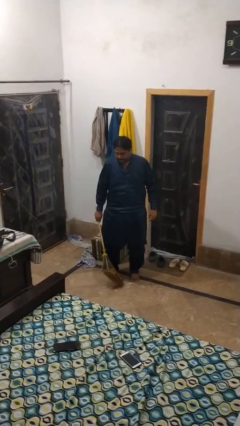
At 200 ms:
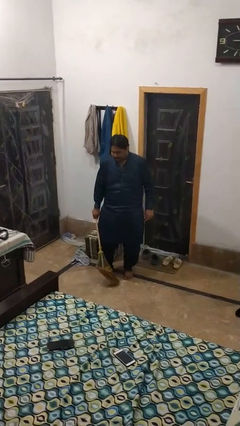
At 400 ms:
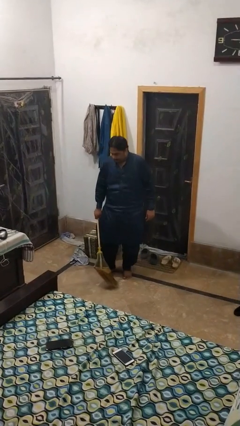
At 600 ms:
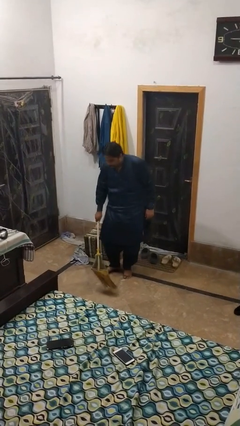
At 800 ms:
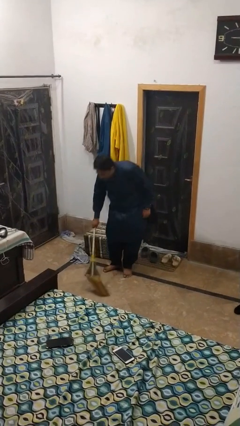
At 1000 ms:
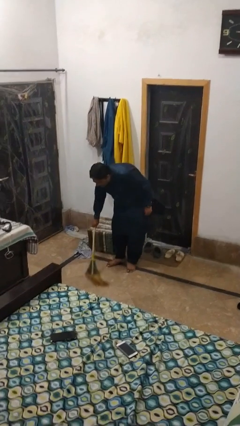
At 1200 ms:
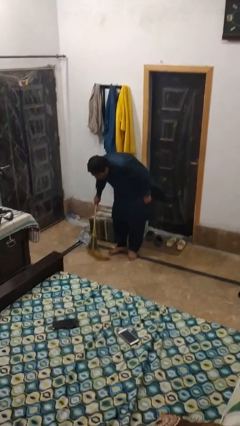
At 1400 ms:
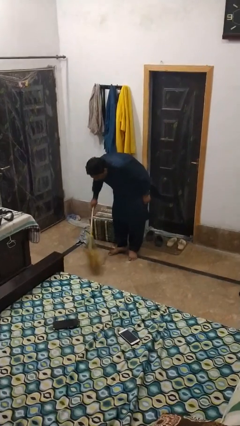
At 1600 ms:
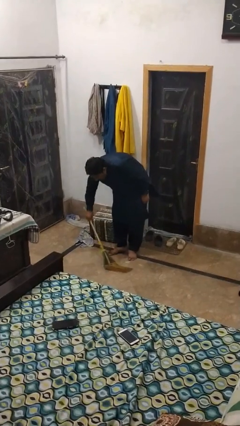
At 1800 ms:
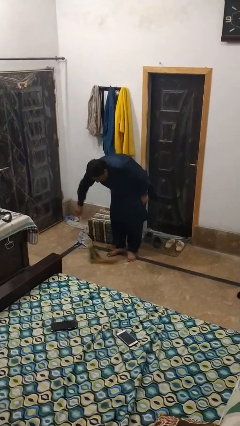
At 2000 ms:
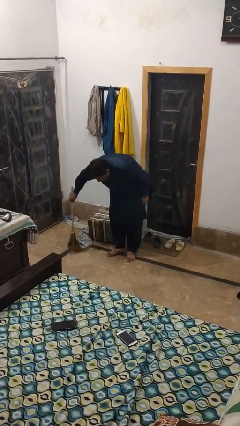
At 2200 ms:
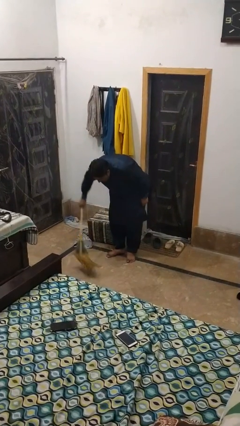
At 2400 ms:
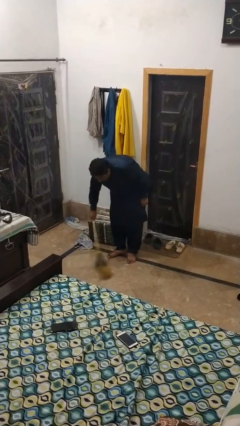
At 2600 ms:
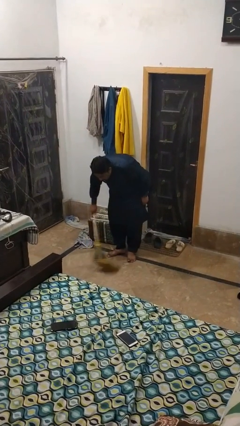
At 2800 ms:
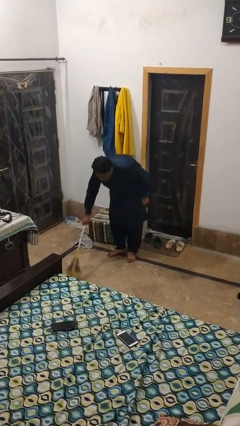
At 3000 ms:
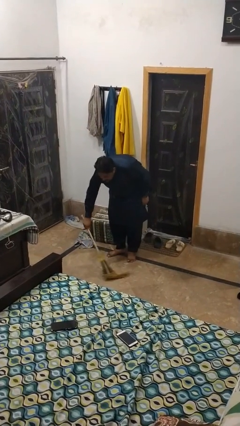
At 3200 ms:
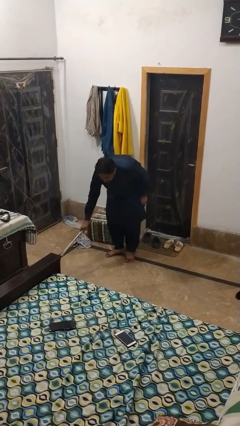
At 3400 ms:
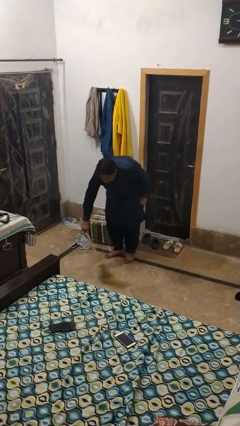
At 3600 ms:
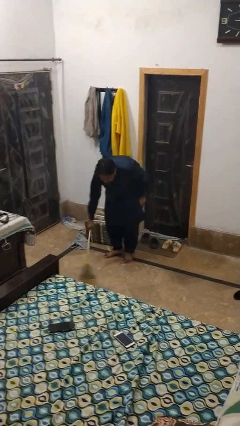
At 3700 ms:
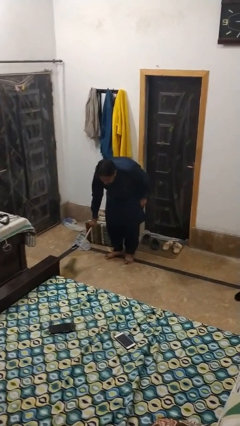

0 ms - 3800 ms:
person sweeps floor

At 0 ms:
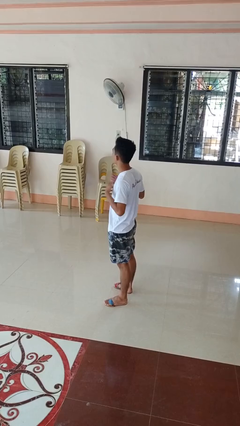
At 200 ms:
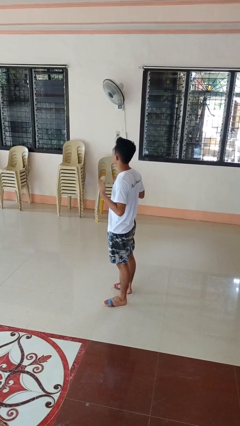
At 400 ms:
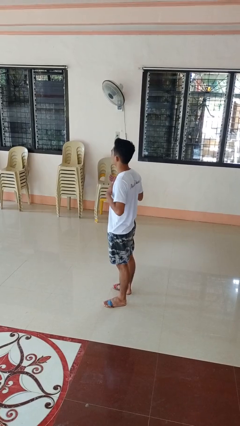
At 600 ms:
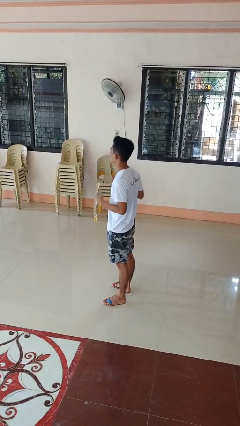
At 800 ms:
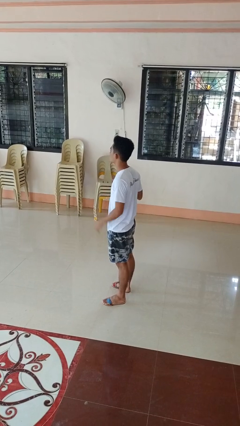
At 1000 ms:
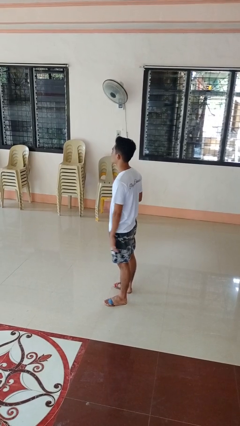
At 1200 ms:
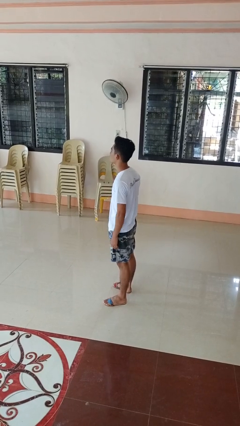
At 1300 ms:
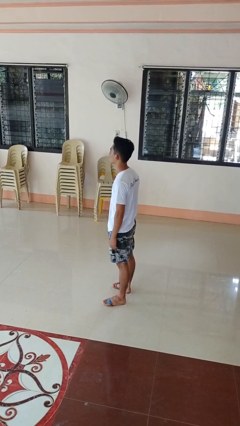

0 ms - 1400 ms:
person drums on chest

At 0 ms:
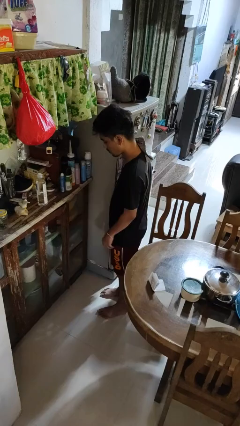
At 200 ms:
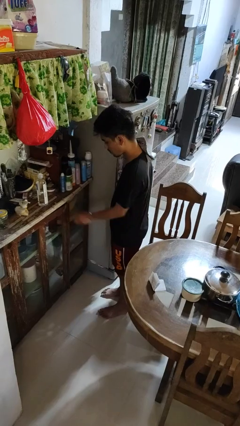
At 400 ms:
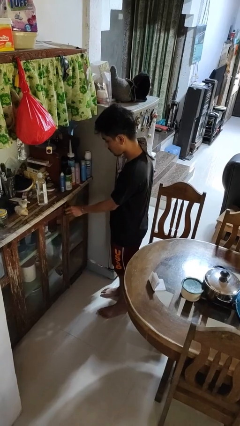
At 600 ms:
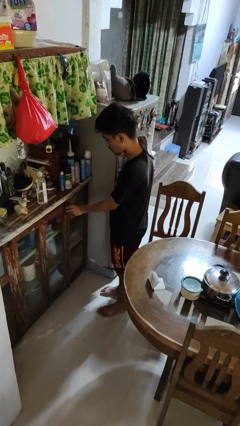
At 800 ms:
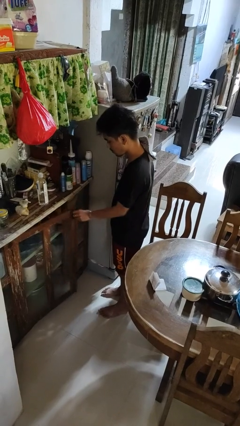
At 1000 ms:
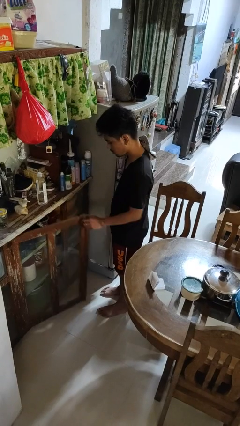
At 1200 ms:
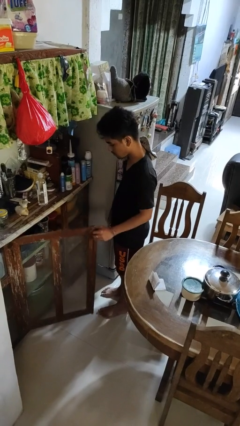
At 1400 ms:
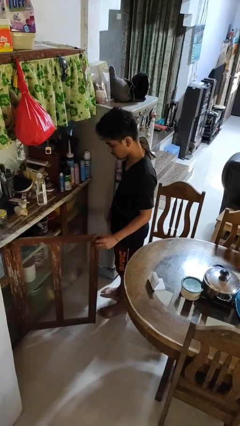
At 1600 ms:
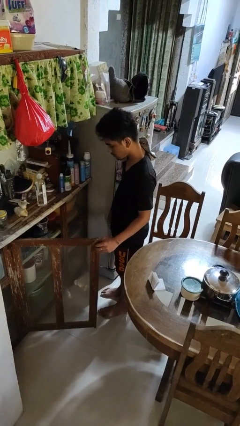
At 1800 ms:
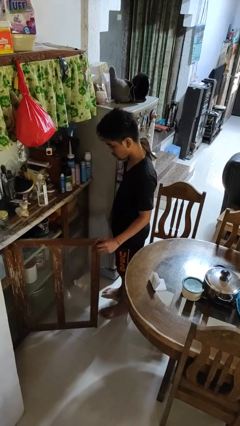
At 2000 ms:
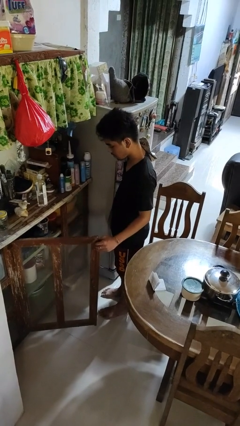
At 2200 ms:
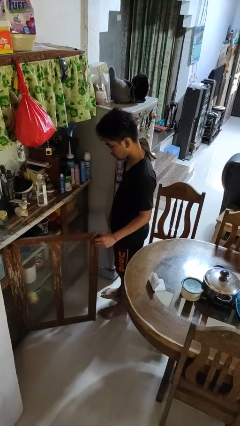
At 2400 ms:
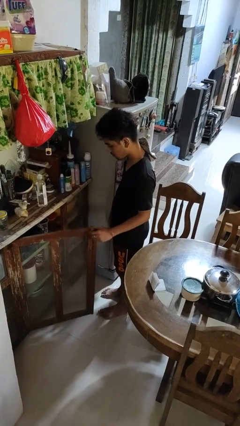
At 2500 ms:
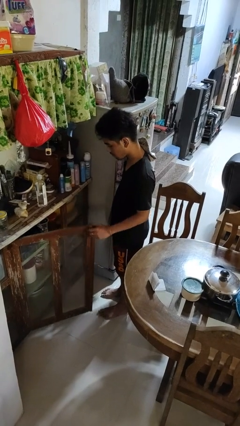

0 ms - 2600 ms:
person opens cabinet

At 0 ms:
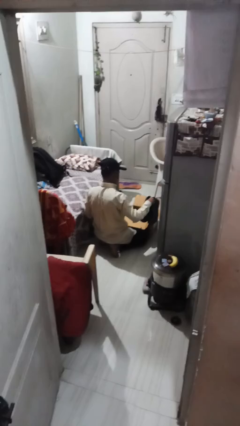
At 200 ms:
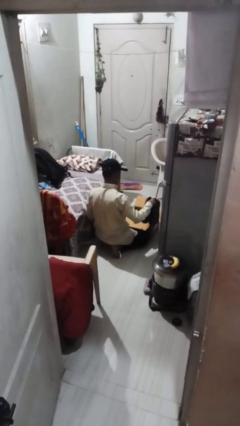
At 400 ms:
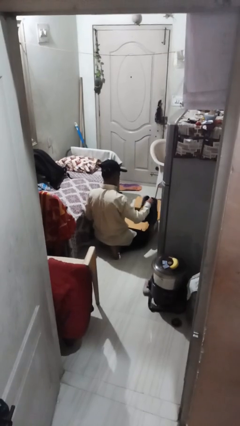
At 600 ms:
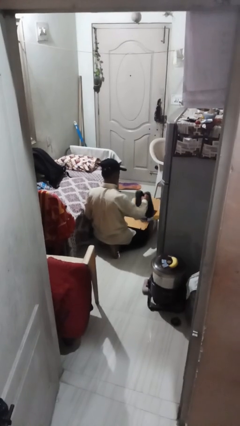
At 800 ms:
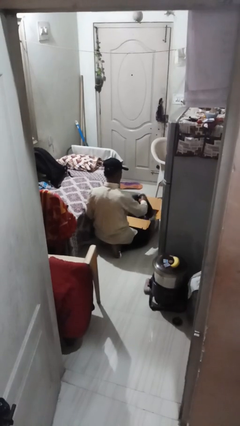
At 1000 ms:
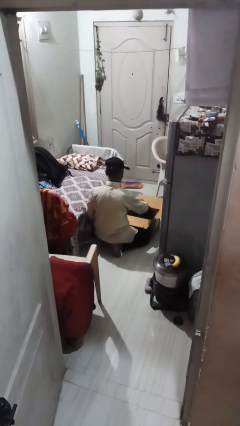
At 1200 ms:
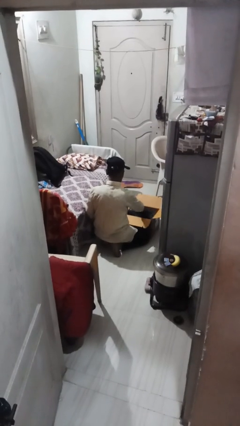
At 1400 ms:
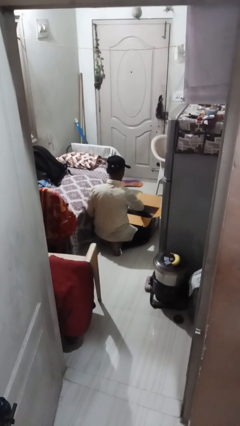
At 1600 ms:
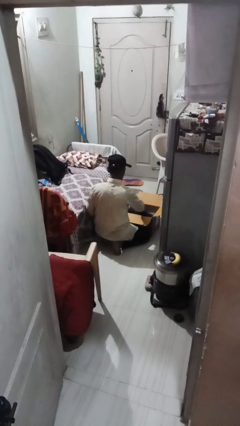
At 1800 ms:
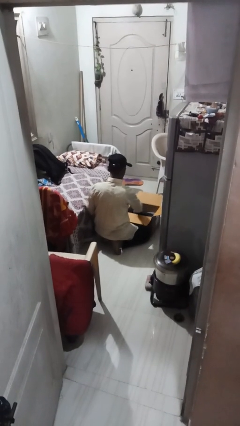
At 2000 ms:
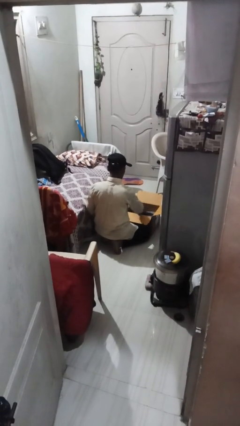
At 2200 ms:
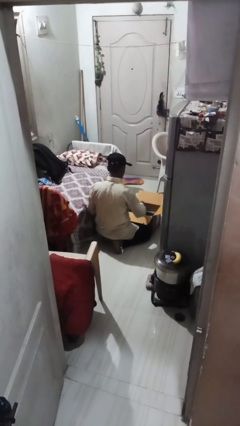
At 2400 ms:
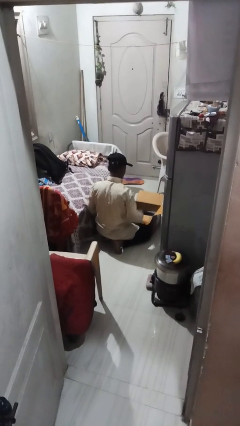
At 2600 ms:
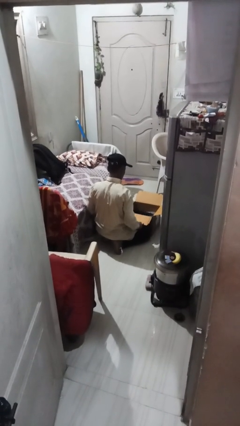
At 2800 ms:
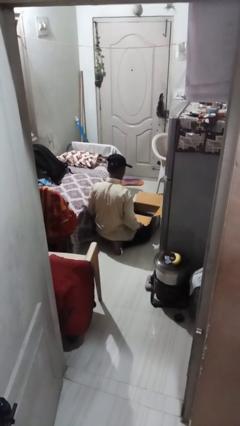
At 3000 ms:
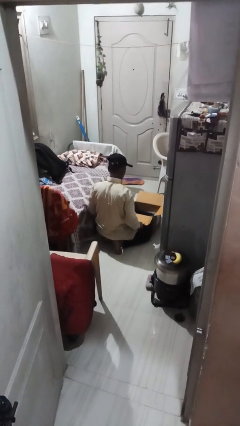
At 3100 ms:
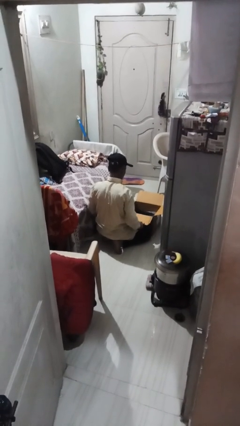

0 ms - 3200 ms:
person puts object into box

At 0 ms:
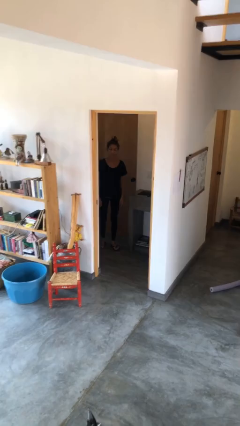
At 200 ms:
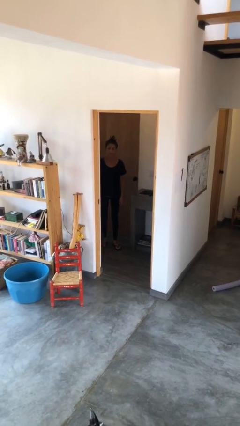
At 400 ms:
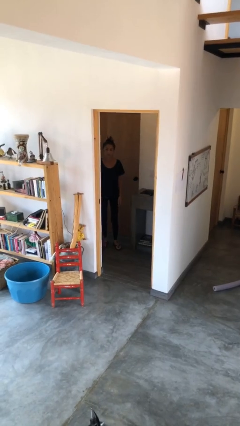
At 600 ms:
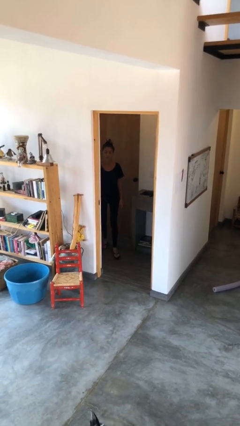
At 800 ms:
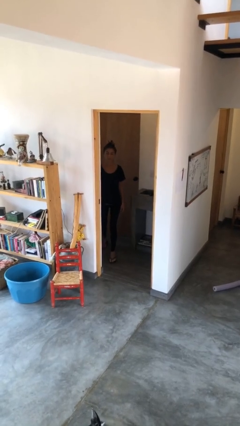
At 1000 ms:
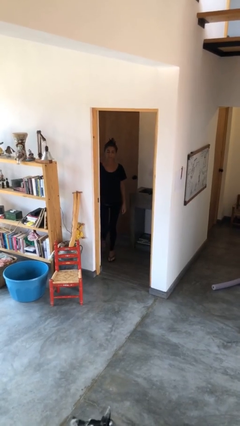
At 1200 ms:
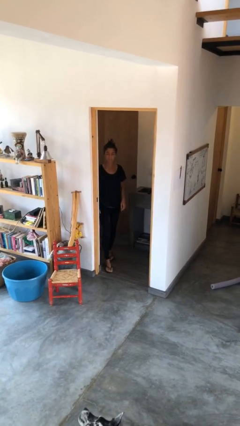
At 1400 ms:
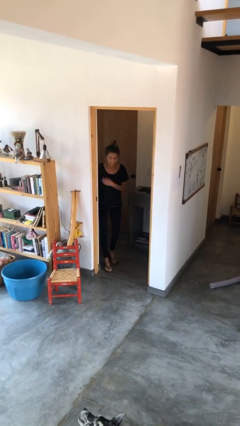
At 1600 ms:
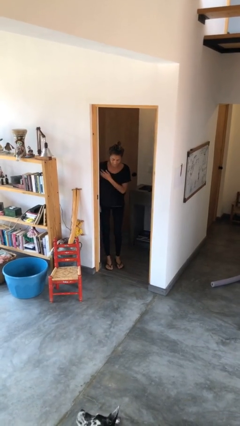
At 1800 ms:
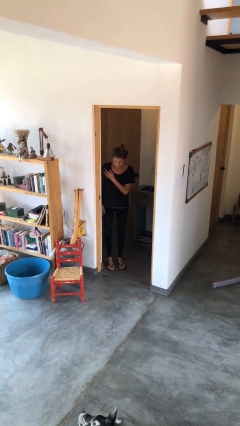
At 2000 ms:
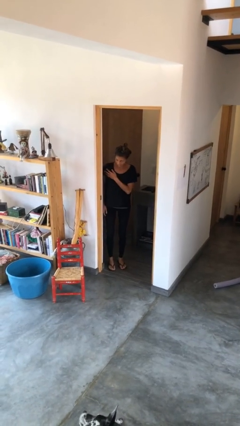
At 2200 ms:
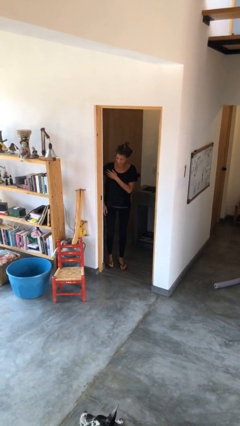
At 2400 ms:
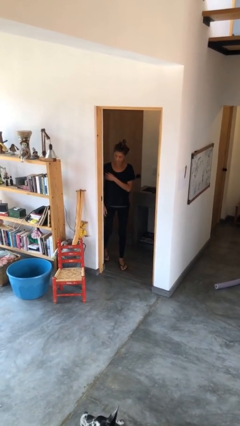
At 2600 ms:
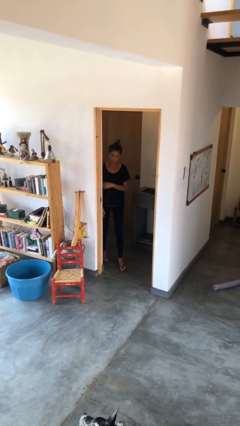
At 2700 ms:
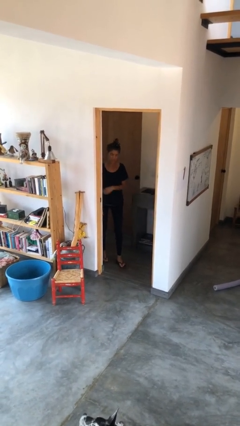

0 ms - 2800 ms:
person bumps into wall

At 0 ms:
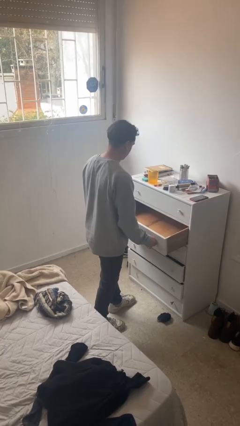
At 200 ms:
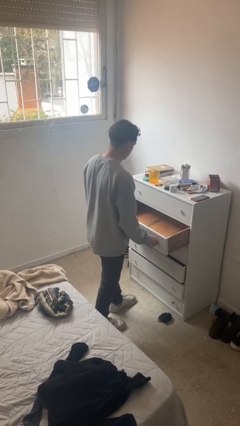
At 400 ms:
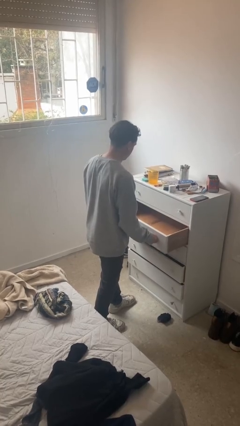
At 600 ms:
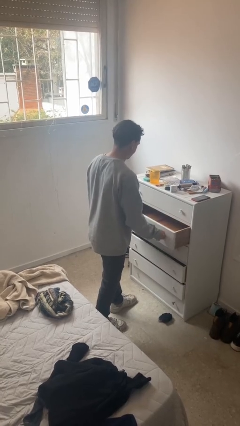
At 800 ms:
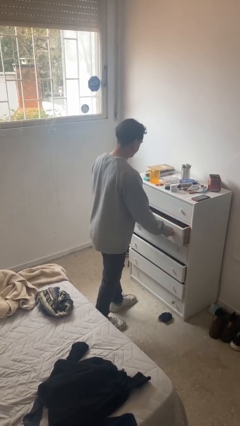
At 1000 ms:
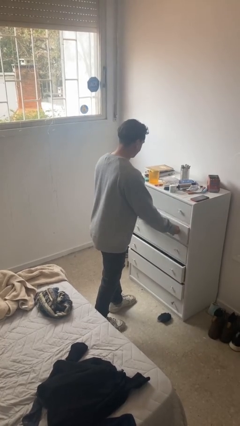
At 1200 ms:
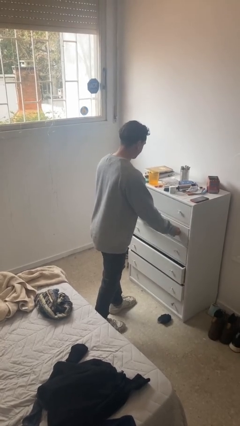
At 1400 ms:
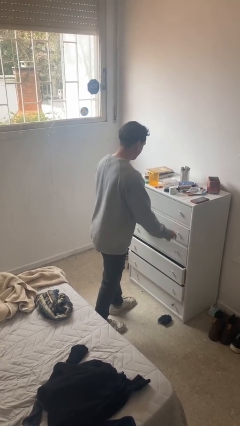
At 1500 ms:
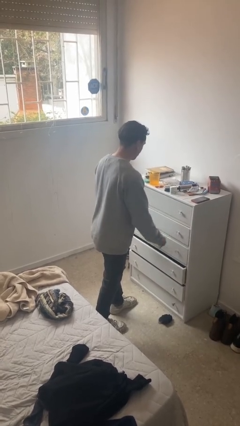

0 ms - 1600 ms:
person closes dresser drawer

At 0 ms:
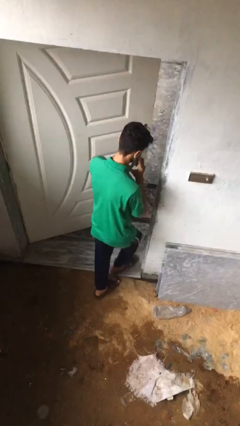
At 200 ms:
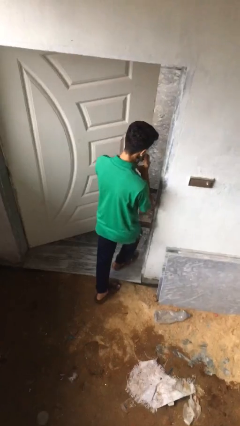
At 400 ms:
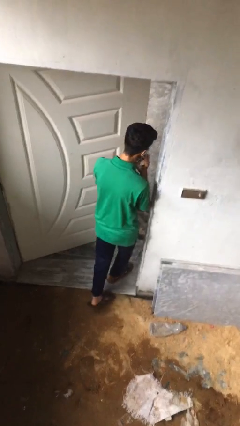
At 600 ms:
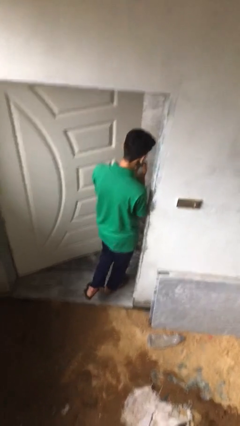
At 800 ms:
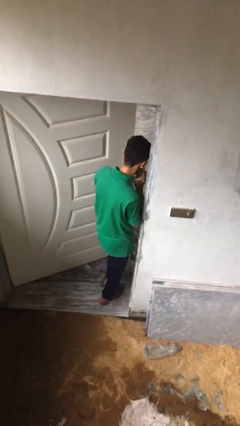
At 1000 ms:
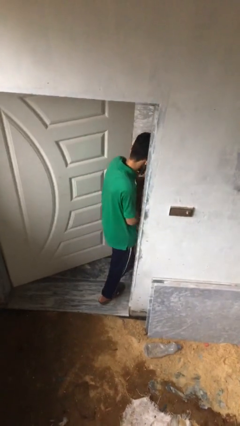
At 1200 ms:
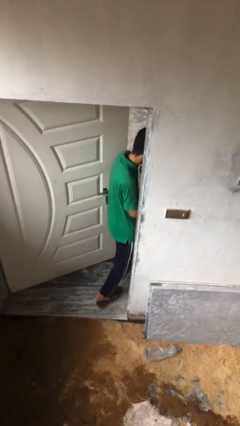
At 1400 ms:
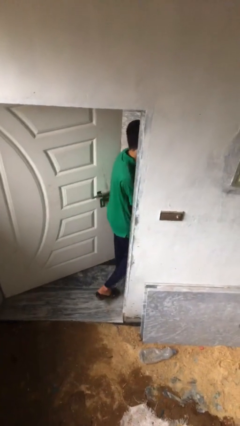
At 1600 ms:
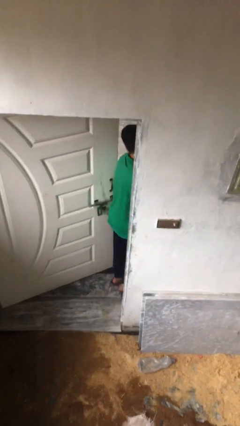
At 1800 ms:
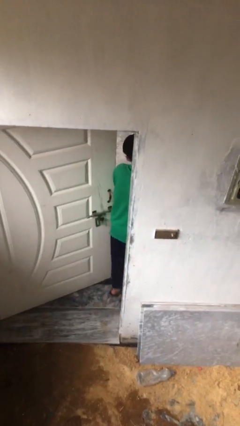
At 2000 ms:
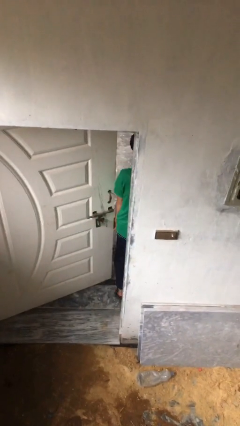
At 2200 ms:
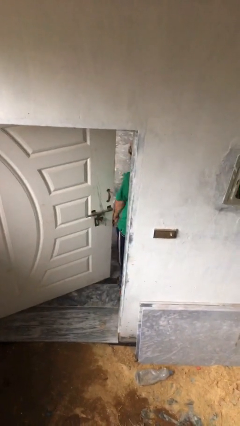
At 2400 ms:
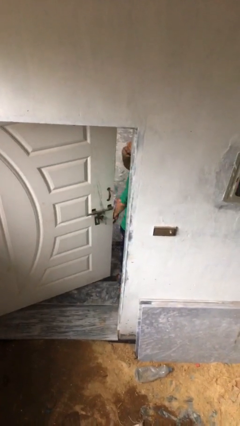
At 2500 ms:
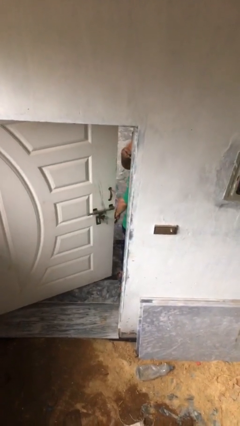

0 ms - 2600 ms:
person exits scene through structure
